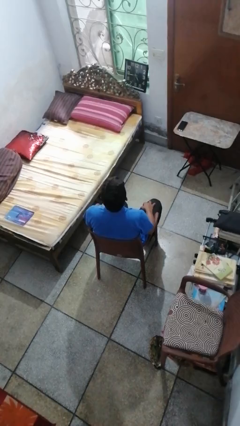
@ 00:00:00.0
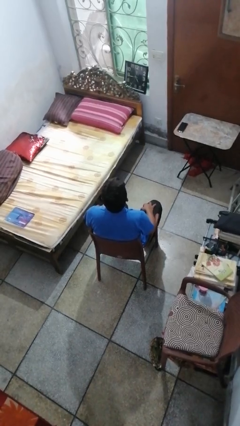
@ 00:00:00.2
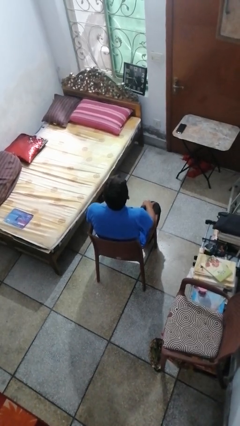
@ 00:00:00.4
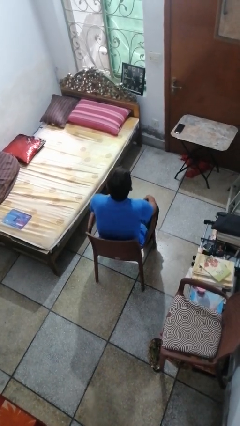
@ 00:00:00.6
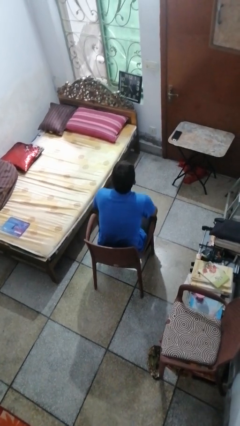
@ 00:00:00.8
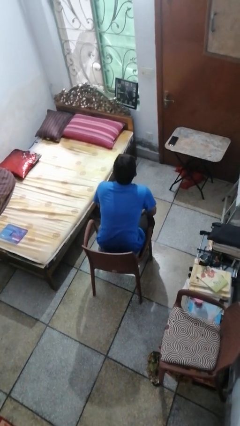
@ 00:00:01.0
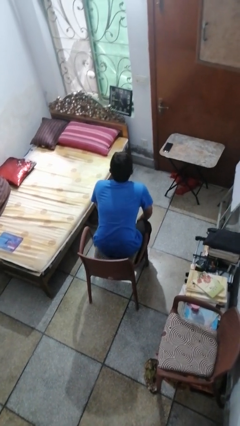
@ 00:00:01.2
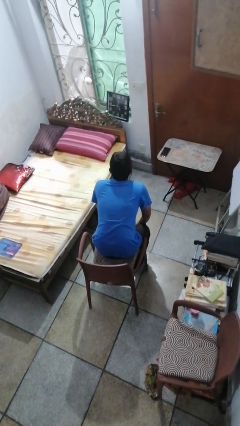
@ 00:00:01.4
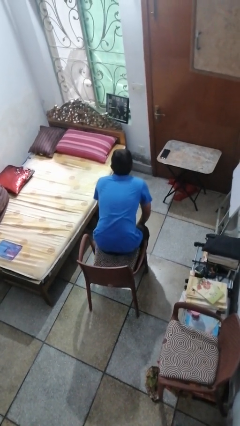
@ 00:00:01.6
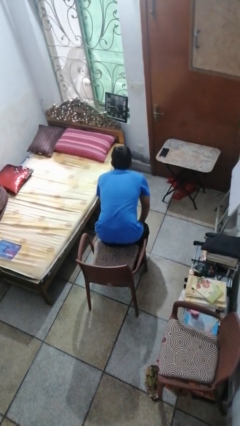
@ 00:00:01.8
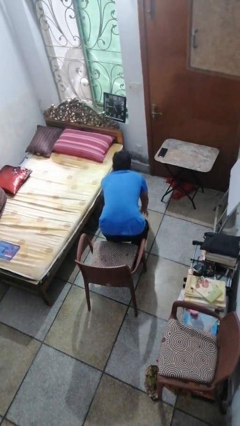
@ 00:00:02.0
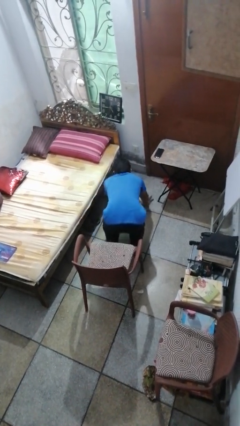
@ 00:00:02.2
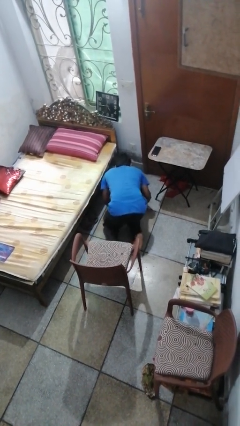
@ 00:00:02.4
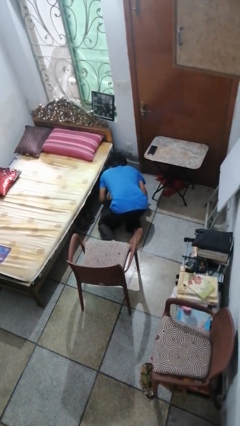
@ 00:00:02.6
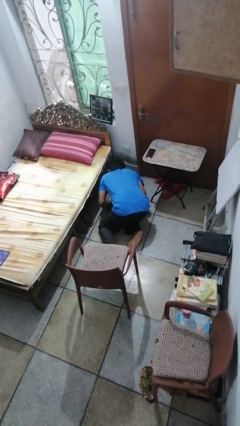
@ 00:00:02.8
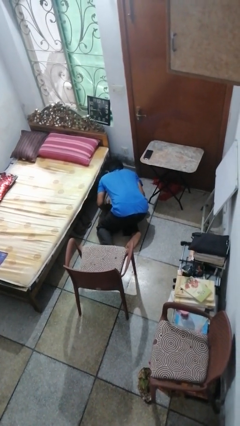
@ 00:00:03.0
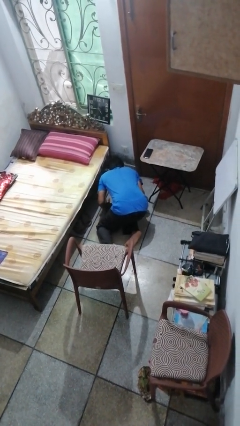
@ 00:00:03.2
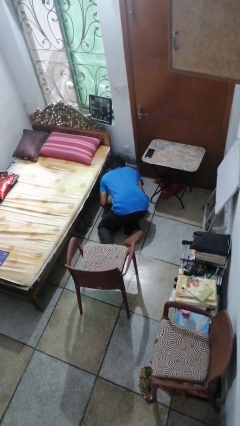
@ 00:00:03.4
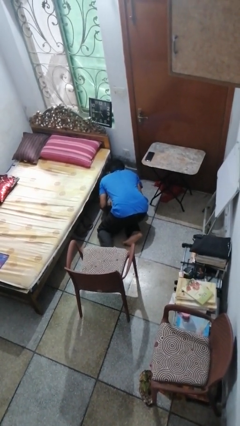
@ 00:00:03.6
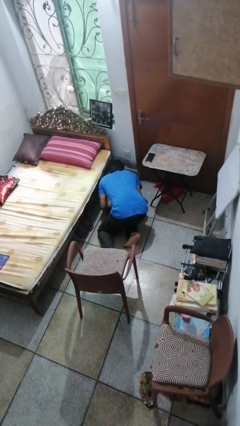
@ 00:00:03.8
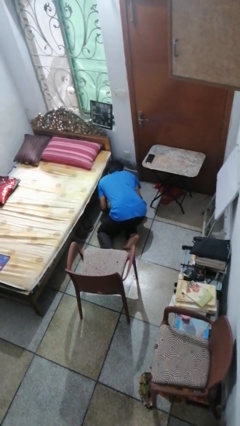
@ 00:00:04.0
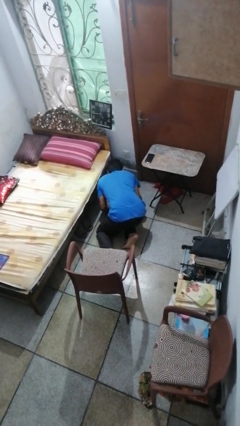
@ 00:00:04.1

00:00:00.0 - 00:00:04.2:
person falls from chair

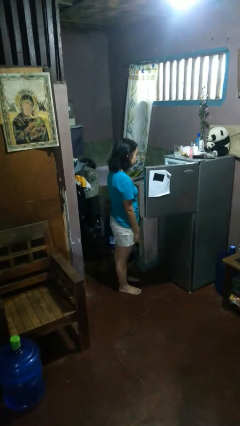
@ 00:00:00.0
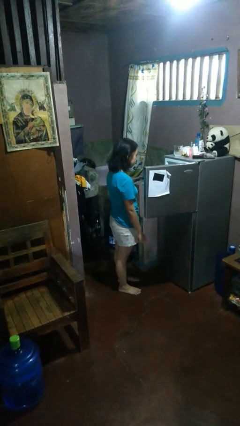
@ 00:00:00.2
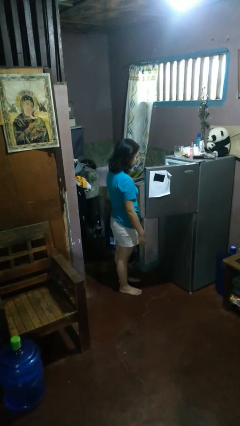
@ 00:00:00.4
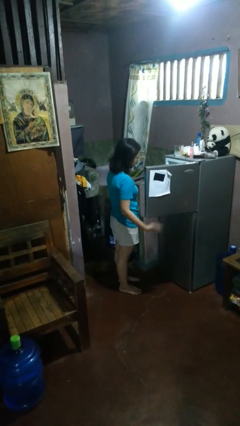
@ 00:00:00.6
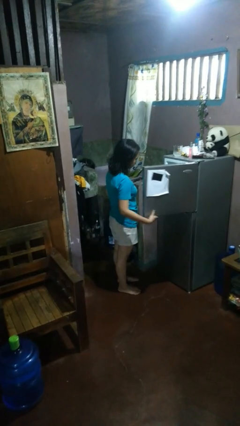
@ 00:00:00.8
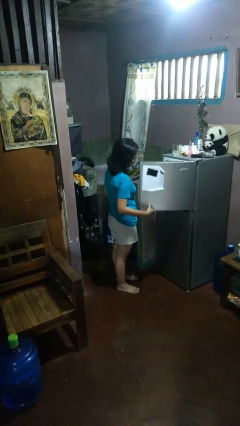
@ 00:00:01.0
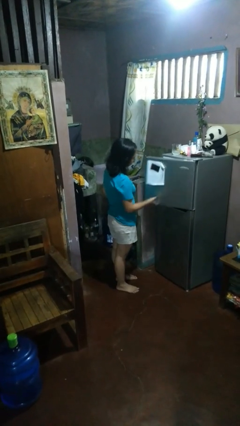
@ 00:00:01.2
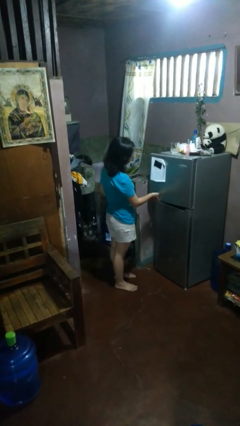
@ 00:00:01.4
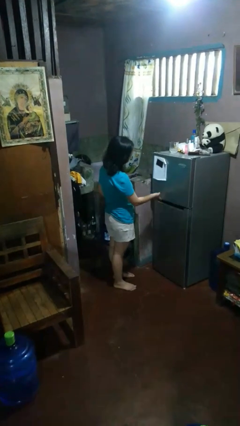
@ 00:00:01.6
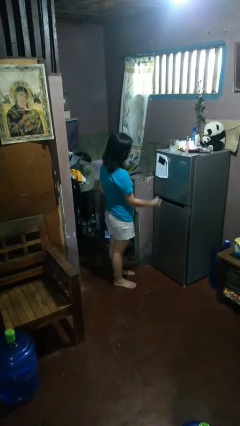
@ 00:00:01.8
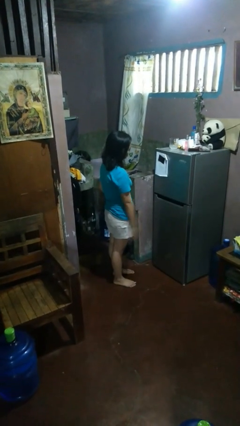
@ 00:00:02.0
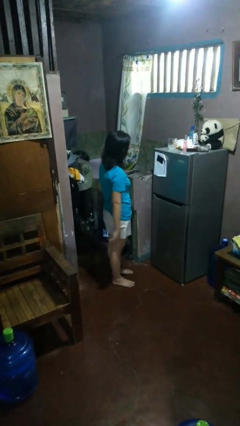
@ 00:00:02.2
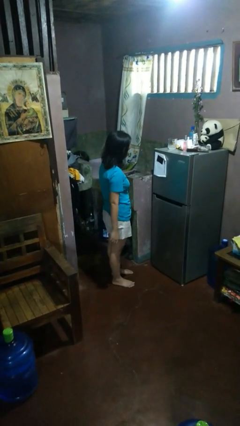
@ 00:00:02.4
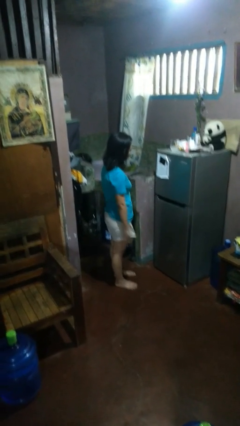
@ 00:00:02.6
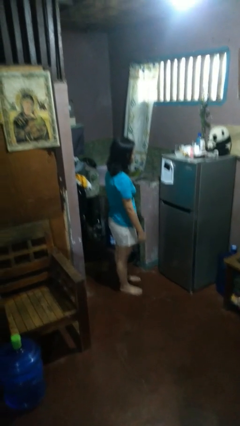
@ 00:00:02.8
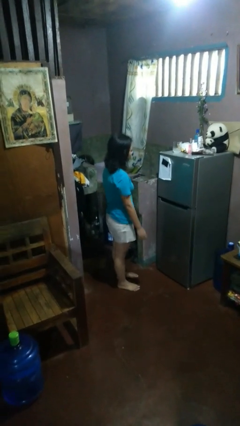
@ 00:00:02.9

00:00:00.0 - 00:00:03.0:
person closes refrigerator

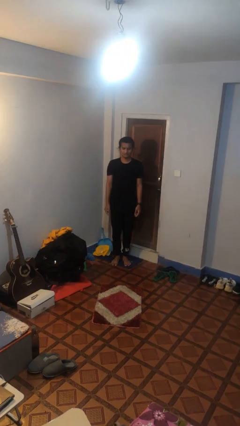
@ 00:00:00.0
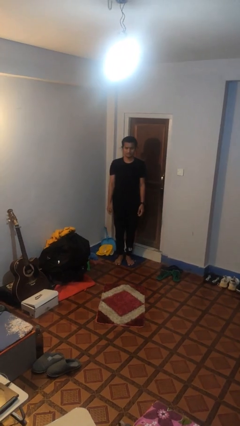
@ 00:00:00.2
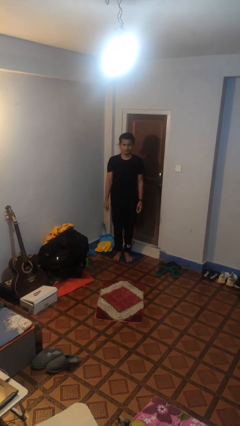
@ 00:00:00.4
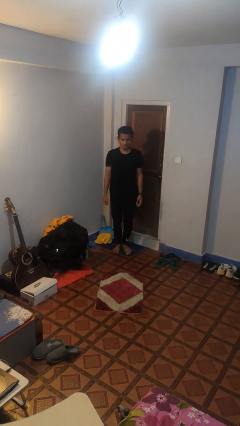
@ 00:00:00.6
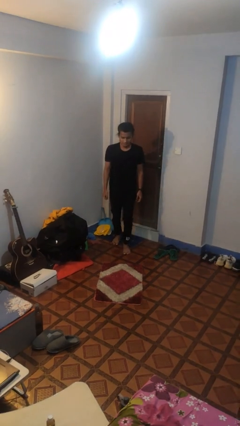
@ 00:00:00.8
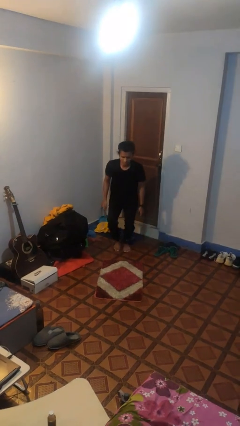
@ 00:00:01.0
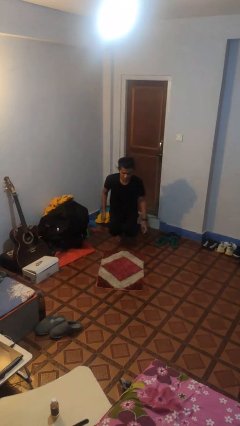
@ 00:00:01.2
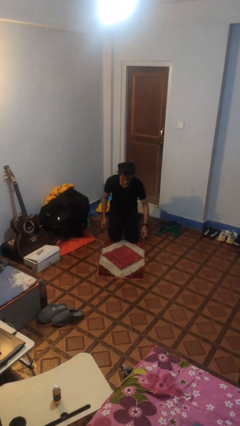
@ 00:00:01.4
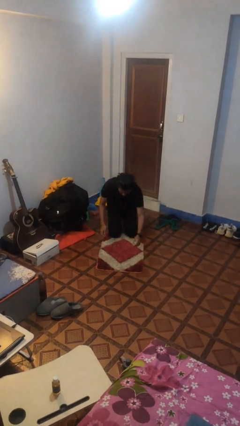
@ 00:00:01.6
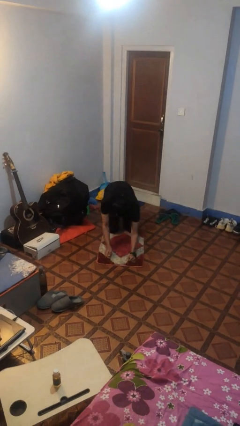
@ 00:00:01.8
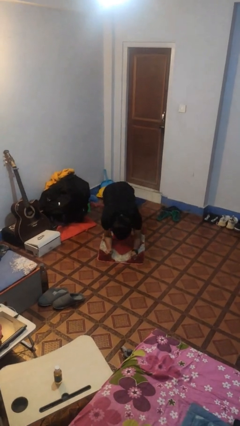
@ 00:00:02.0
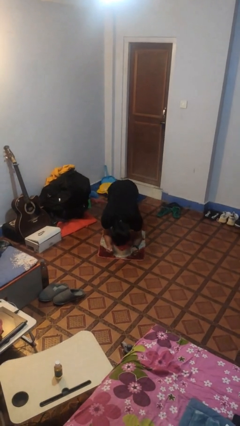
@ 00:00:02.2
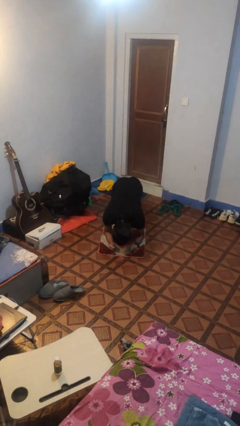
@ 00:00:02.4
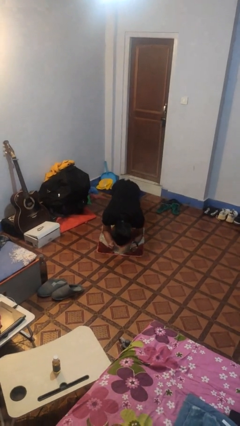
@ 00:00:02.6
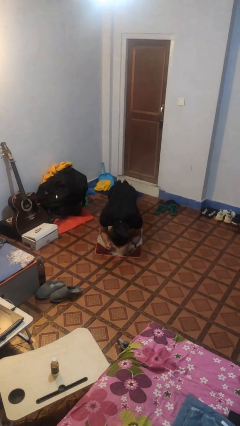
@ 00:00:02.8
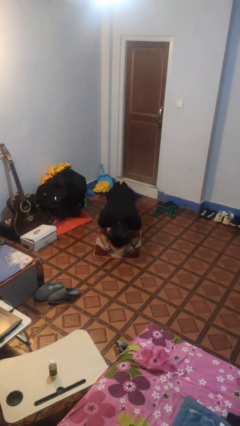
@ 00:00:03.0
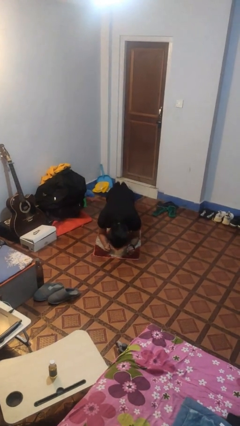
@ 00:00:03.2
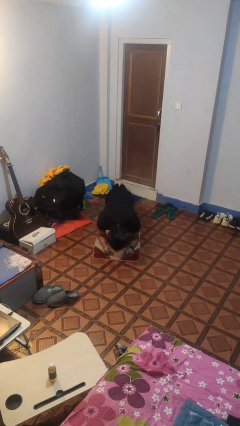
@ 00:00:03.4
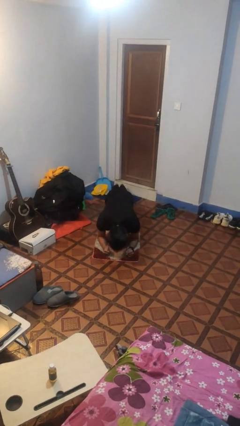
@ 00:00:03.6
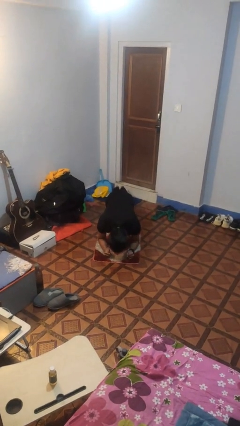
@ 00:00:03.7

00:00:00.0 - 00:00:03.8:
person exercises with plank

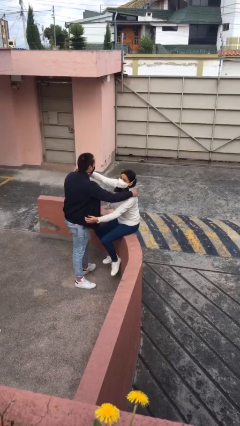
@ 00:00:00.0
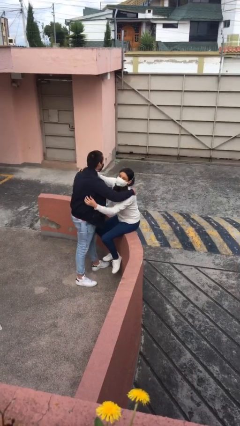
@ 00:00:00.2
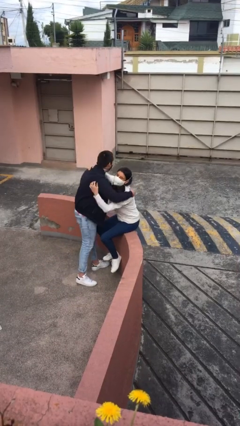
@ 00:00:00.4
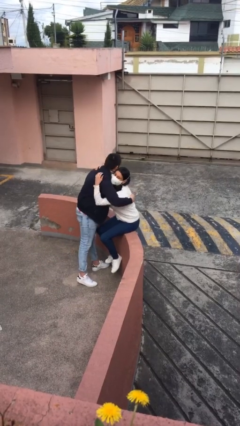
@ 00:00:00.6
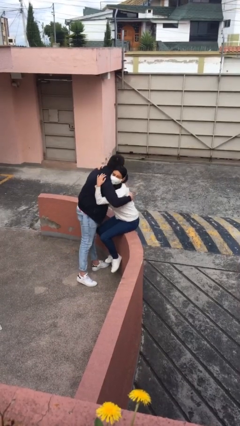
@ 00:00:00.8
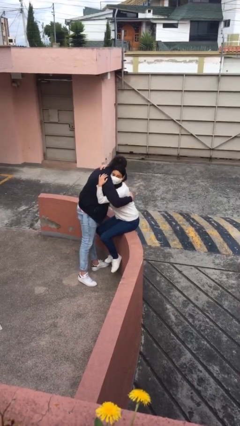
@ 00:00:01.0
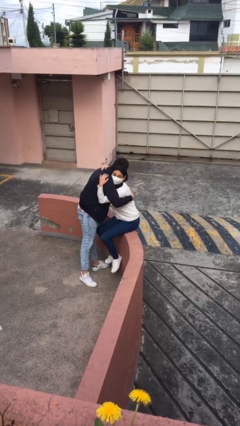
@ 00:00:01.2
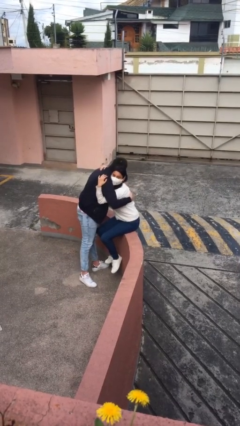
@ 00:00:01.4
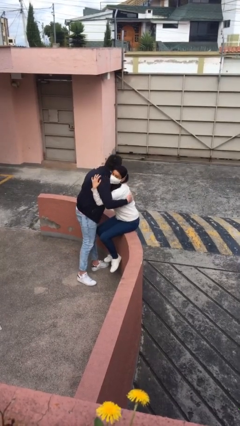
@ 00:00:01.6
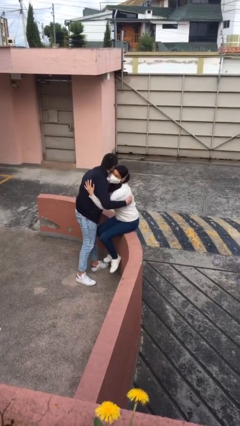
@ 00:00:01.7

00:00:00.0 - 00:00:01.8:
person embraces person

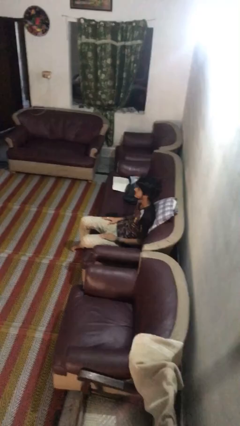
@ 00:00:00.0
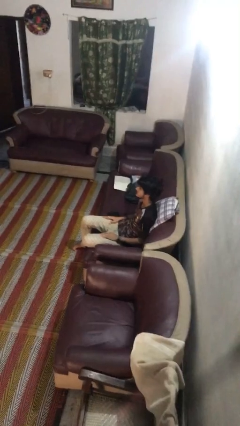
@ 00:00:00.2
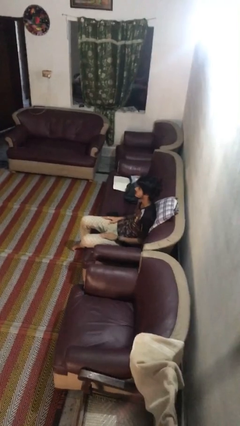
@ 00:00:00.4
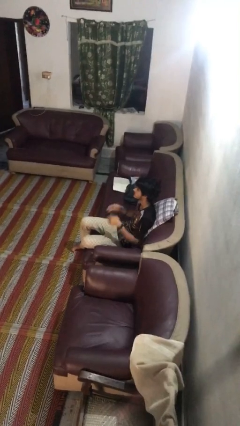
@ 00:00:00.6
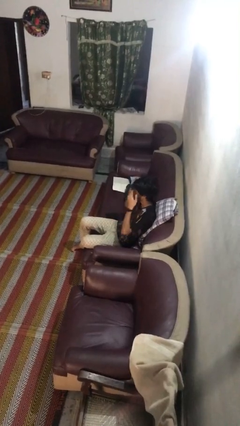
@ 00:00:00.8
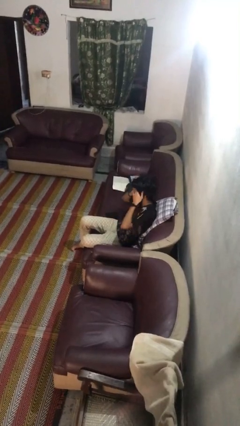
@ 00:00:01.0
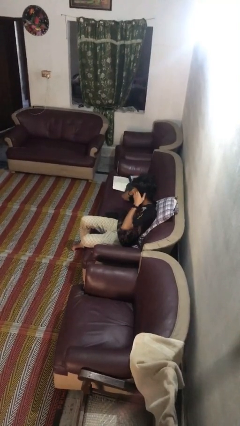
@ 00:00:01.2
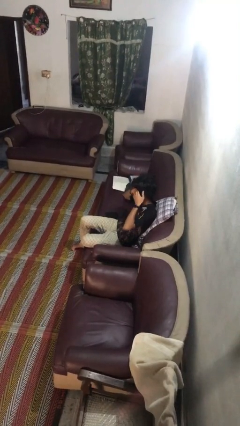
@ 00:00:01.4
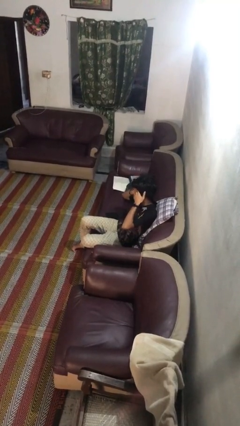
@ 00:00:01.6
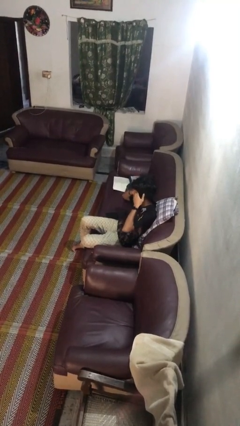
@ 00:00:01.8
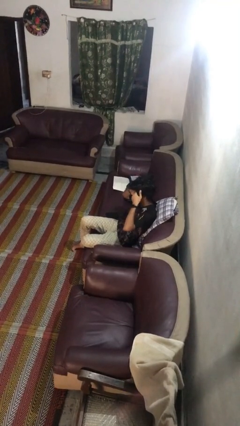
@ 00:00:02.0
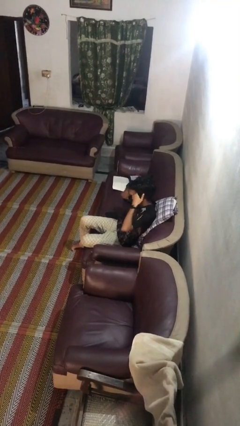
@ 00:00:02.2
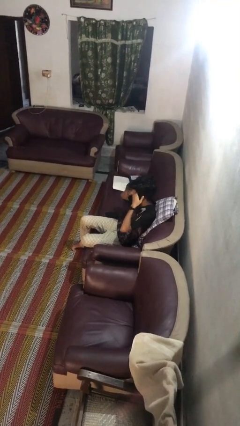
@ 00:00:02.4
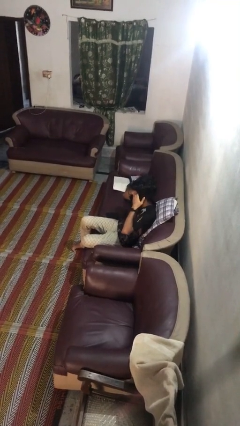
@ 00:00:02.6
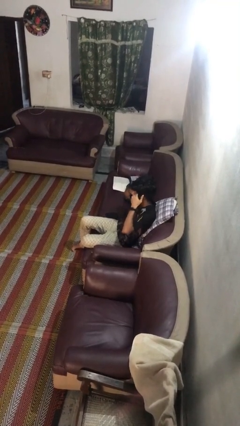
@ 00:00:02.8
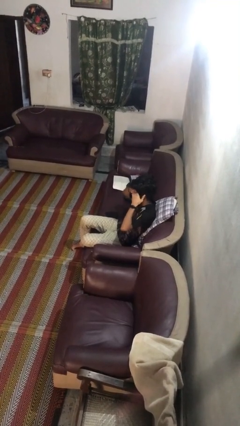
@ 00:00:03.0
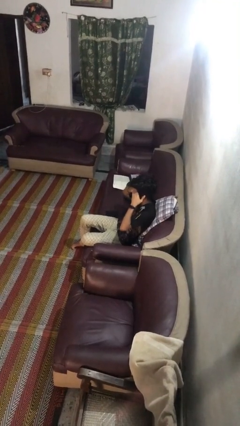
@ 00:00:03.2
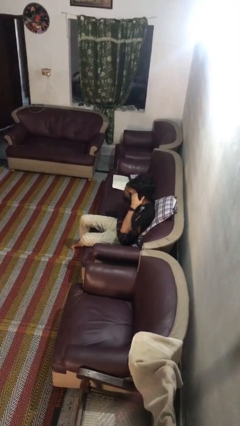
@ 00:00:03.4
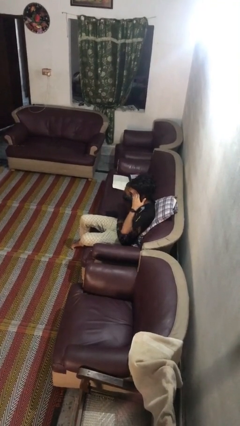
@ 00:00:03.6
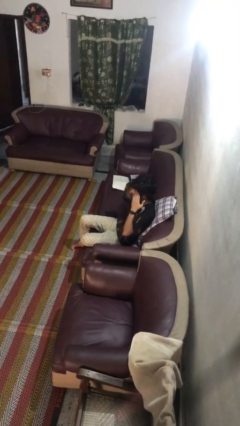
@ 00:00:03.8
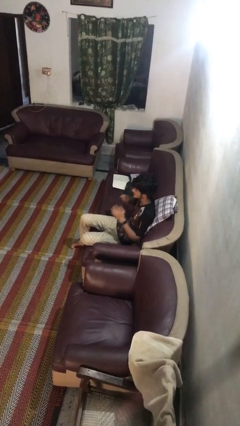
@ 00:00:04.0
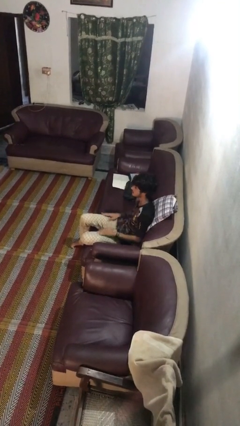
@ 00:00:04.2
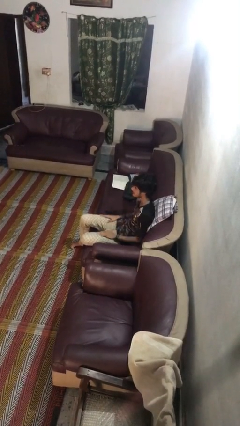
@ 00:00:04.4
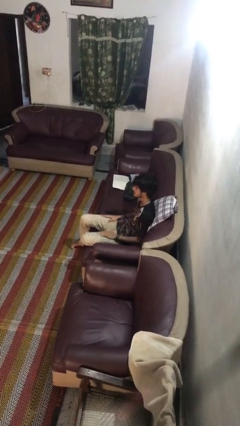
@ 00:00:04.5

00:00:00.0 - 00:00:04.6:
person rubs eyes
